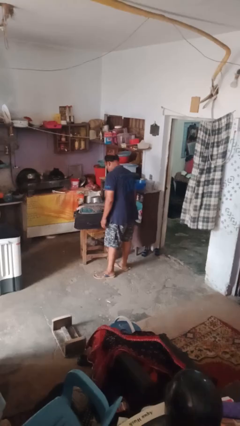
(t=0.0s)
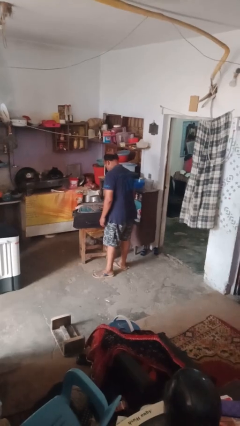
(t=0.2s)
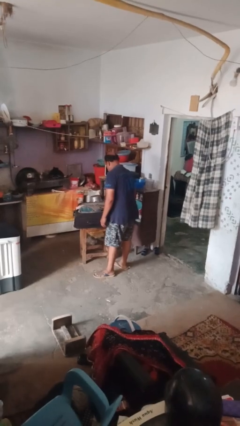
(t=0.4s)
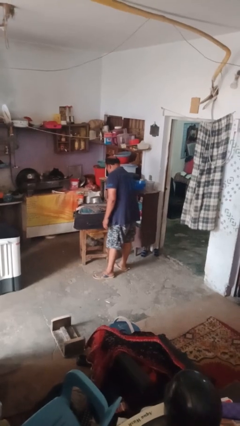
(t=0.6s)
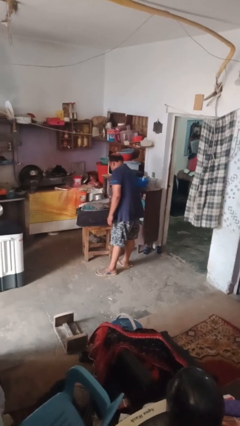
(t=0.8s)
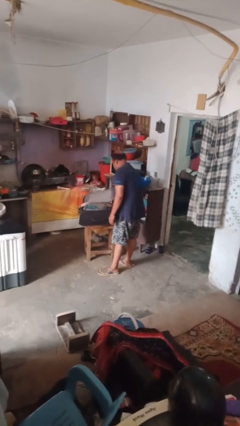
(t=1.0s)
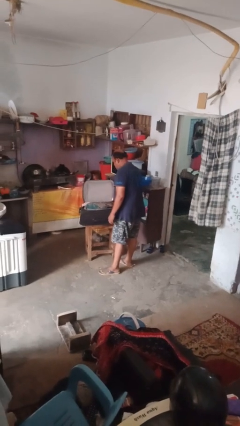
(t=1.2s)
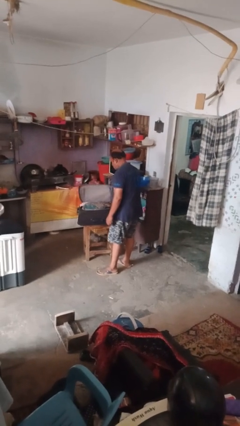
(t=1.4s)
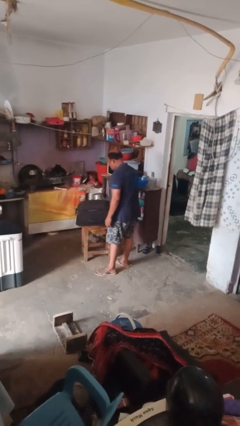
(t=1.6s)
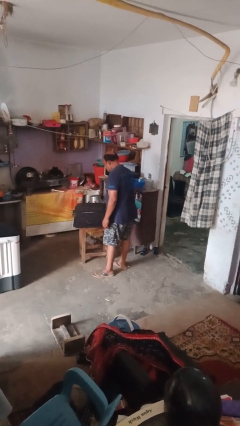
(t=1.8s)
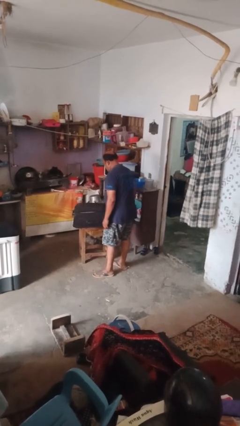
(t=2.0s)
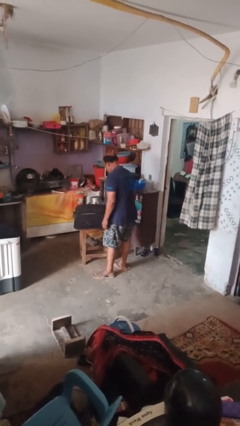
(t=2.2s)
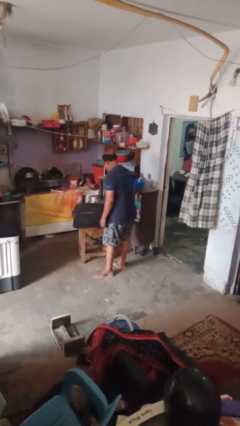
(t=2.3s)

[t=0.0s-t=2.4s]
person closes suitcase

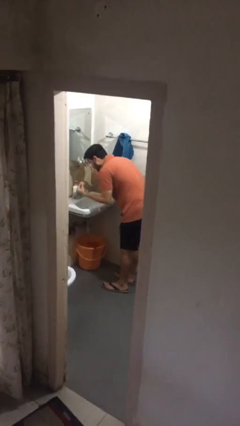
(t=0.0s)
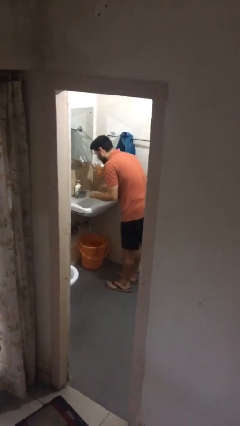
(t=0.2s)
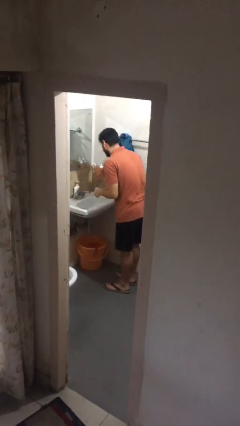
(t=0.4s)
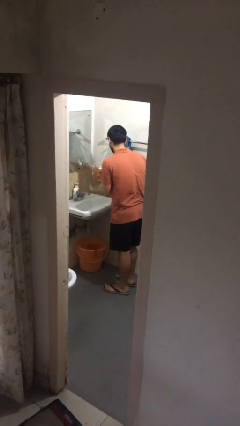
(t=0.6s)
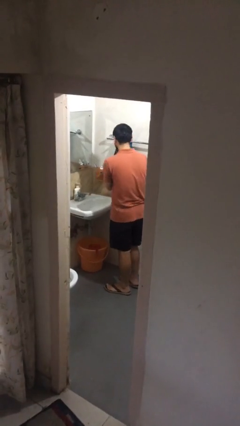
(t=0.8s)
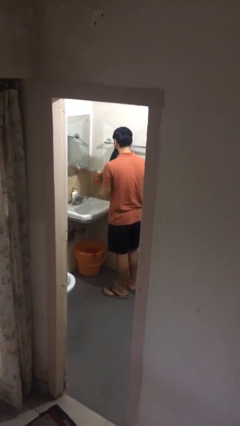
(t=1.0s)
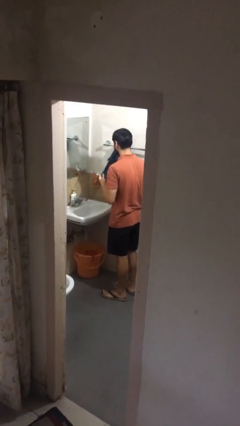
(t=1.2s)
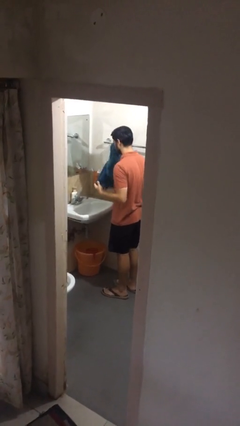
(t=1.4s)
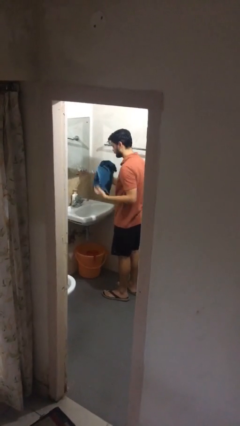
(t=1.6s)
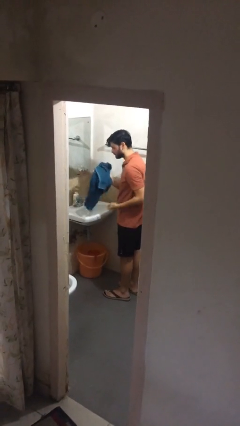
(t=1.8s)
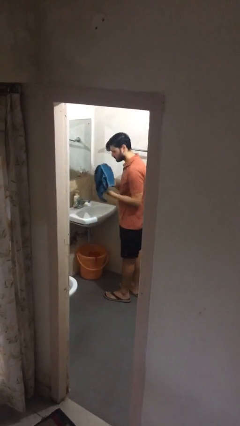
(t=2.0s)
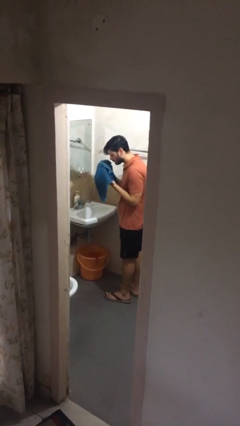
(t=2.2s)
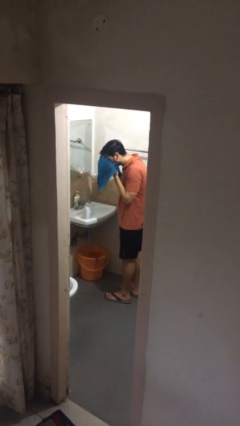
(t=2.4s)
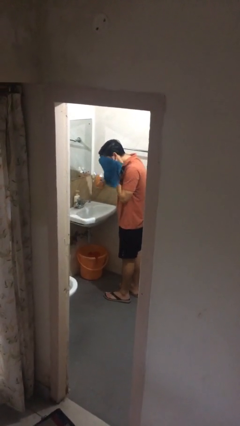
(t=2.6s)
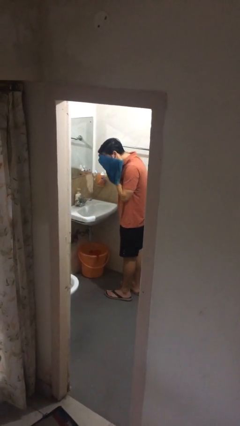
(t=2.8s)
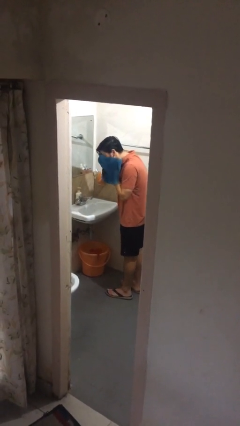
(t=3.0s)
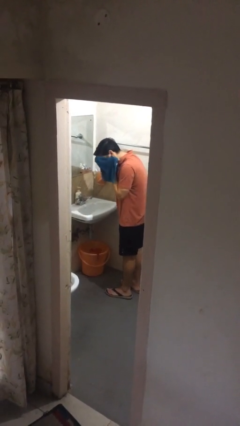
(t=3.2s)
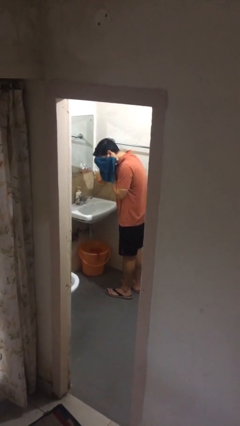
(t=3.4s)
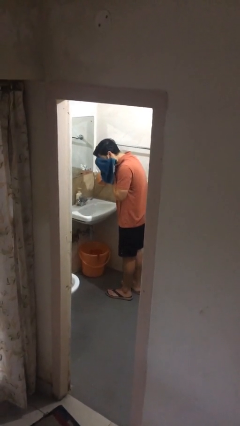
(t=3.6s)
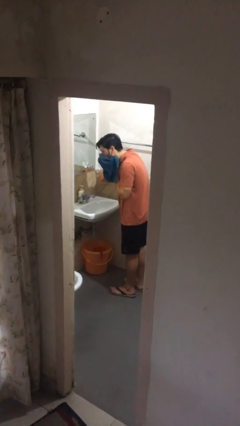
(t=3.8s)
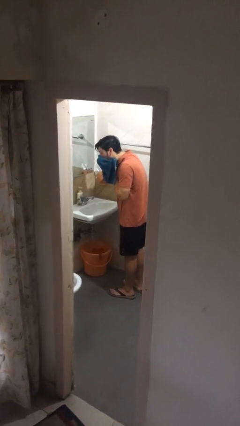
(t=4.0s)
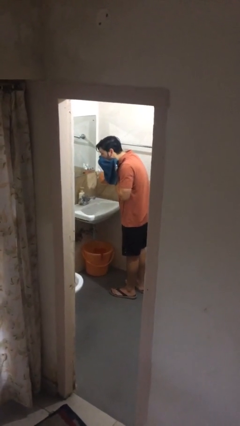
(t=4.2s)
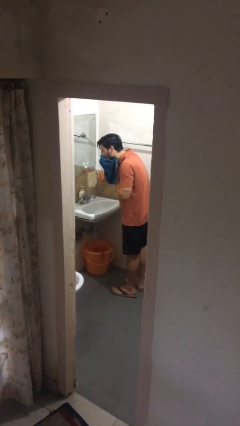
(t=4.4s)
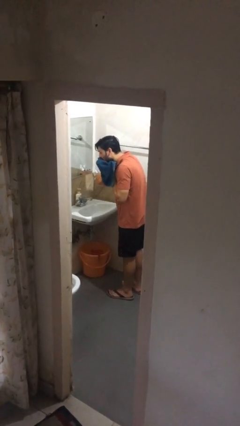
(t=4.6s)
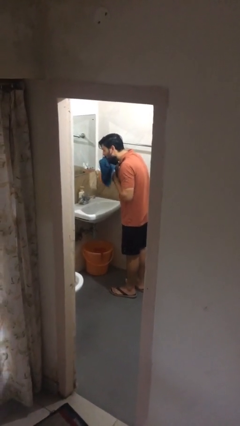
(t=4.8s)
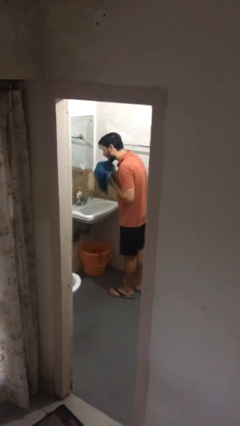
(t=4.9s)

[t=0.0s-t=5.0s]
person dries face with towel

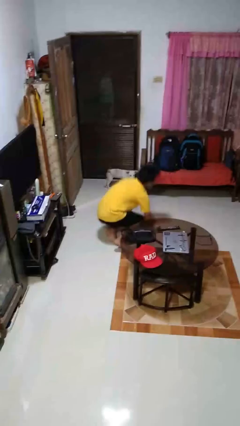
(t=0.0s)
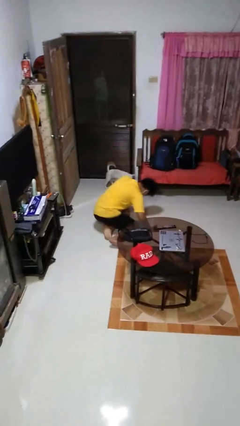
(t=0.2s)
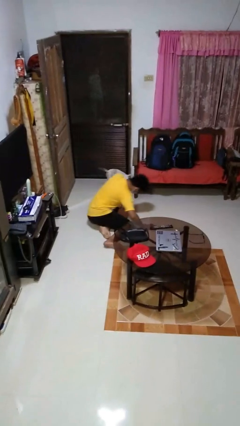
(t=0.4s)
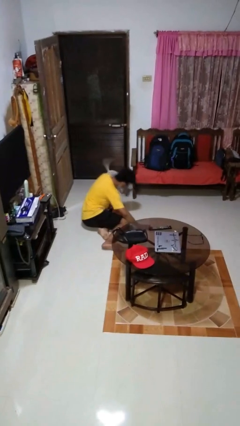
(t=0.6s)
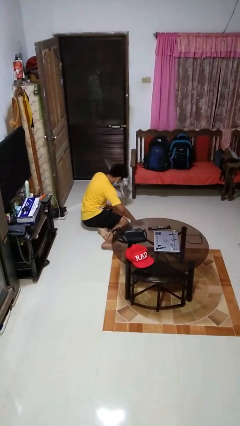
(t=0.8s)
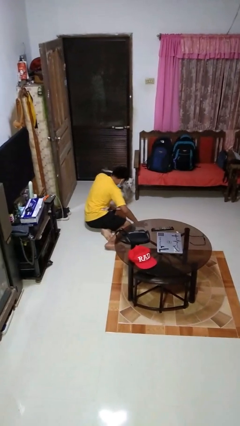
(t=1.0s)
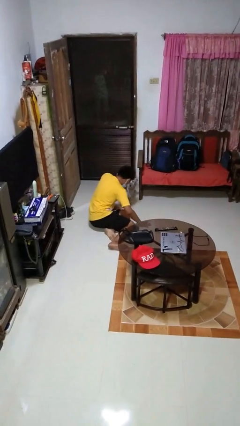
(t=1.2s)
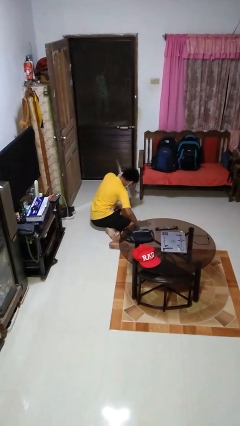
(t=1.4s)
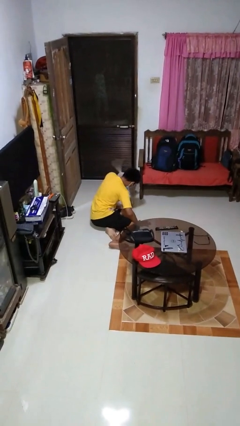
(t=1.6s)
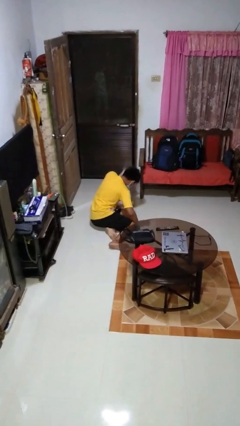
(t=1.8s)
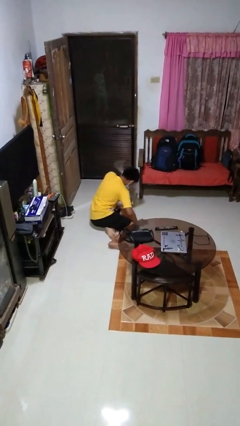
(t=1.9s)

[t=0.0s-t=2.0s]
person lies down on floor

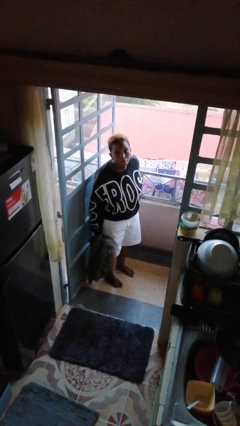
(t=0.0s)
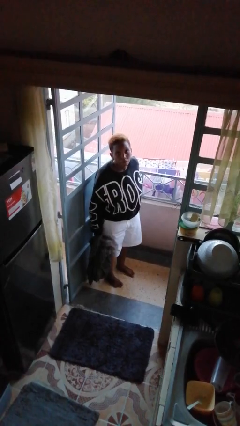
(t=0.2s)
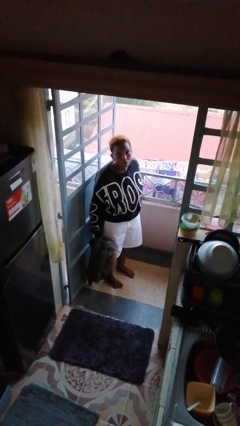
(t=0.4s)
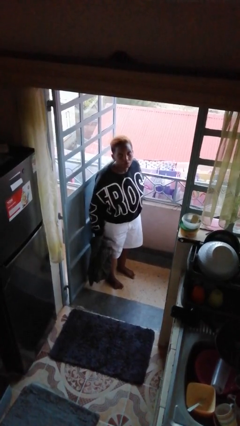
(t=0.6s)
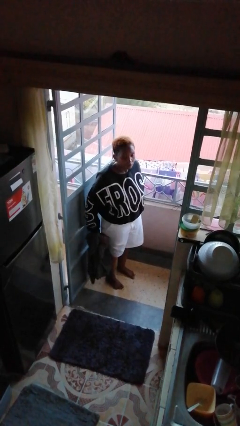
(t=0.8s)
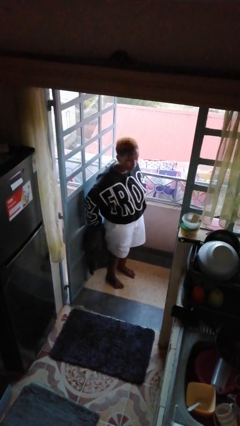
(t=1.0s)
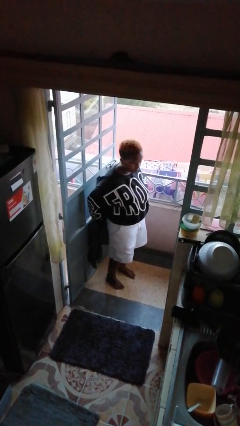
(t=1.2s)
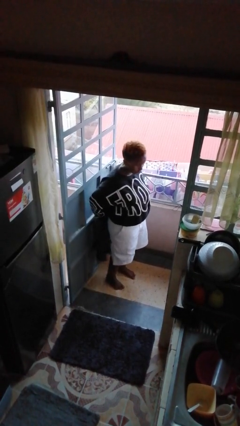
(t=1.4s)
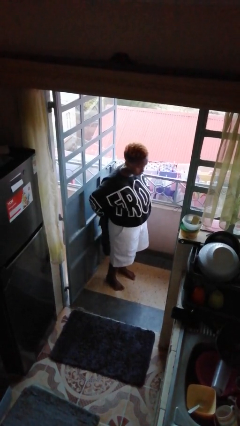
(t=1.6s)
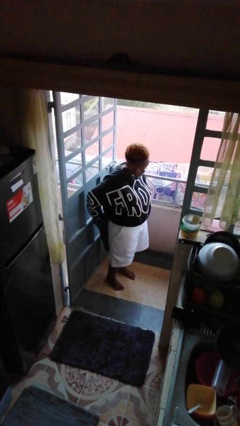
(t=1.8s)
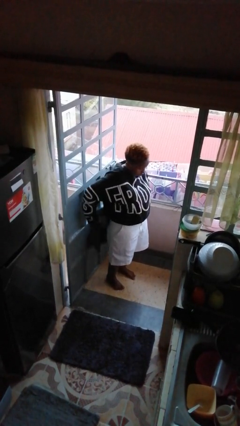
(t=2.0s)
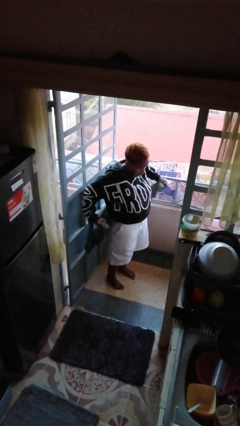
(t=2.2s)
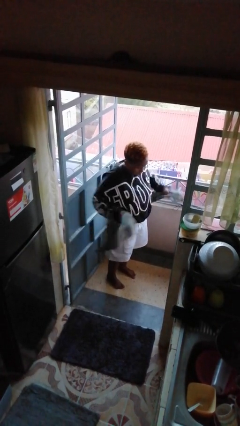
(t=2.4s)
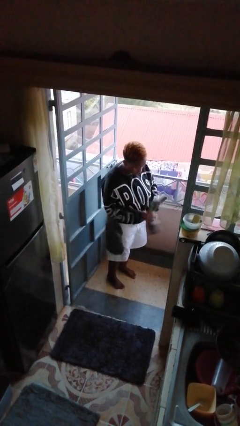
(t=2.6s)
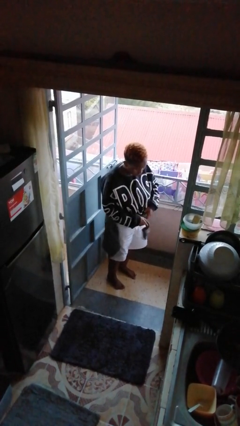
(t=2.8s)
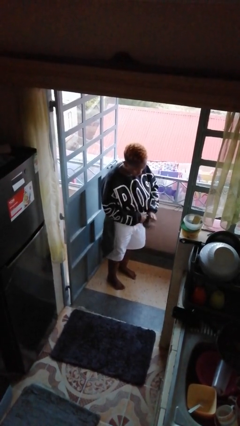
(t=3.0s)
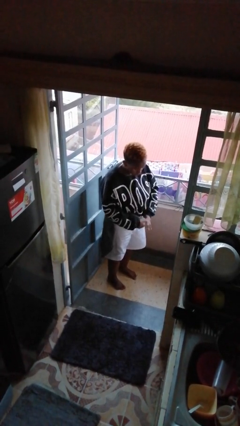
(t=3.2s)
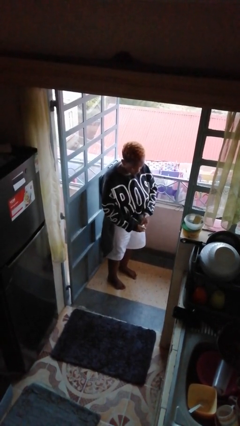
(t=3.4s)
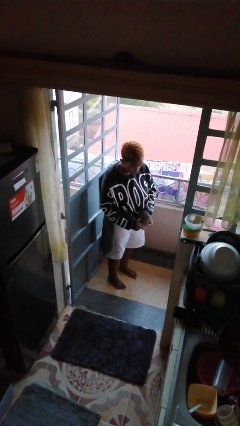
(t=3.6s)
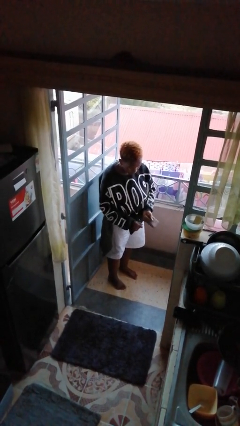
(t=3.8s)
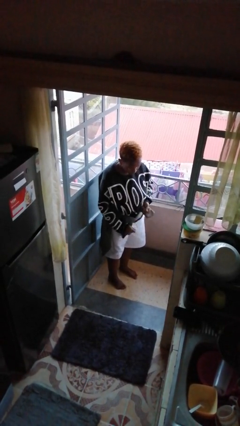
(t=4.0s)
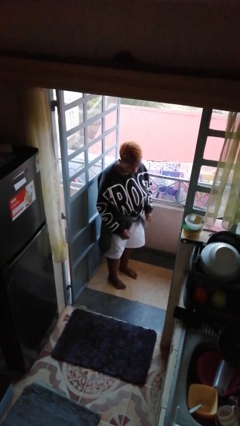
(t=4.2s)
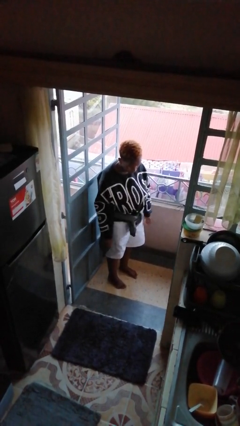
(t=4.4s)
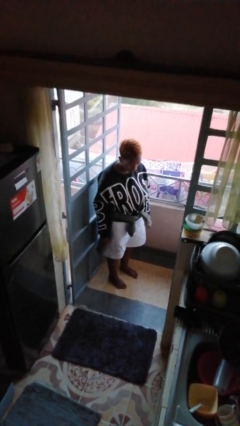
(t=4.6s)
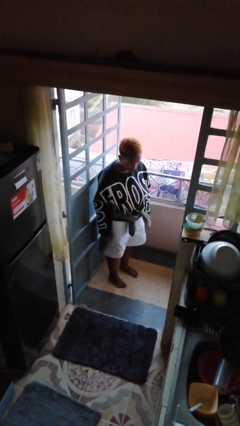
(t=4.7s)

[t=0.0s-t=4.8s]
person ties jacket around waist

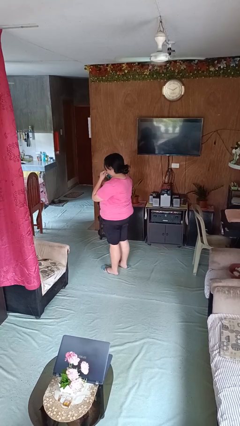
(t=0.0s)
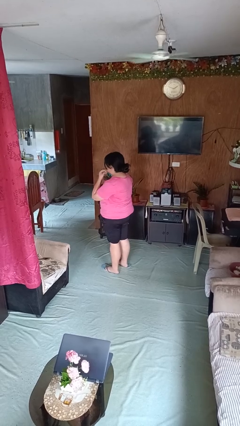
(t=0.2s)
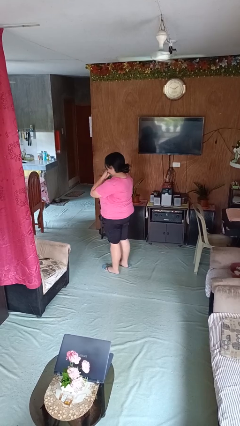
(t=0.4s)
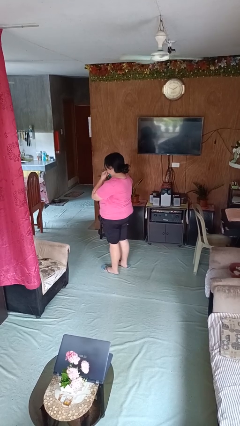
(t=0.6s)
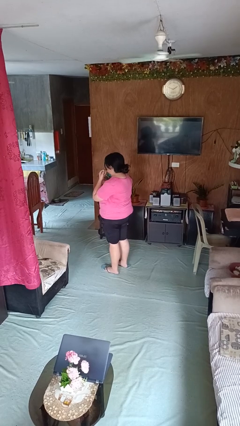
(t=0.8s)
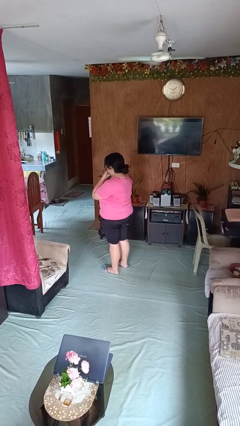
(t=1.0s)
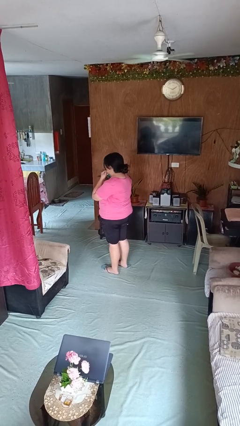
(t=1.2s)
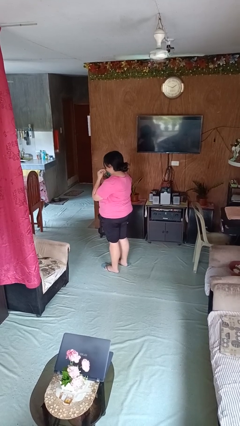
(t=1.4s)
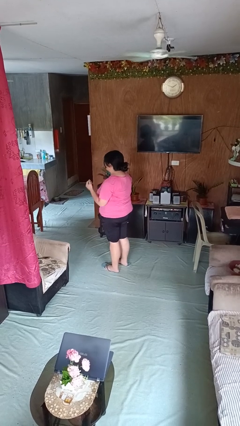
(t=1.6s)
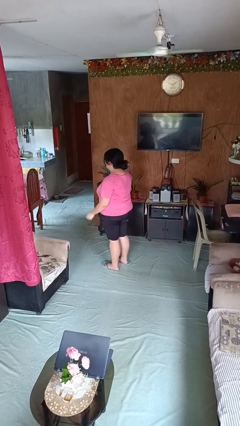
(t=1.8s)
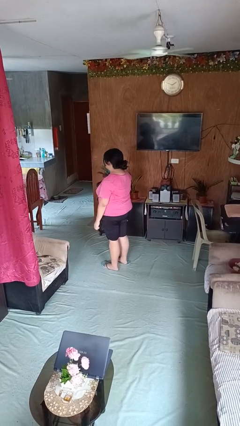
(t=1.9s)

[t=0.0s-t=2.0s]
person strokes chin

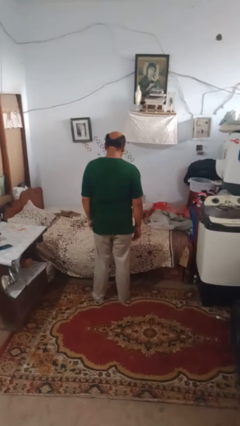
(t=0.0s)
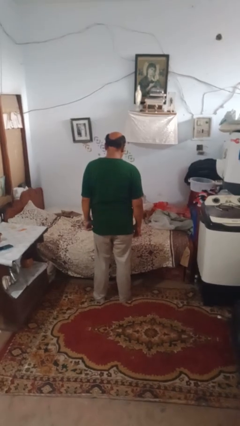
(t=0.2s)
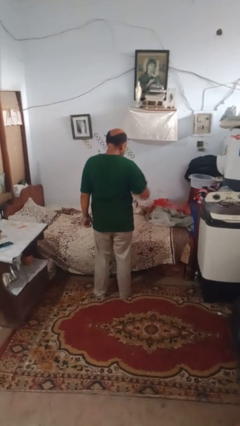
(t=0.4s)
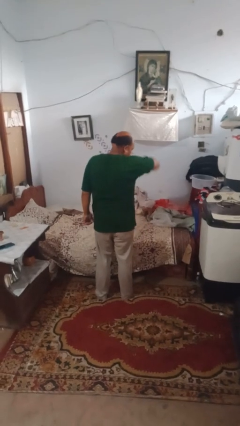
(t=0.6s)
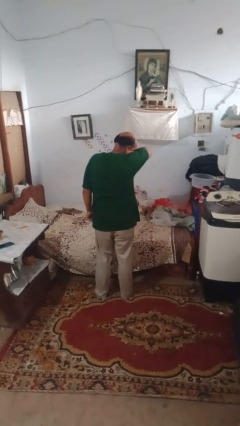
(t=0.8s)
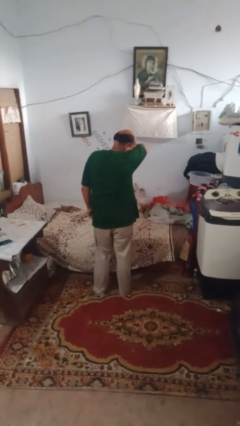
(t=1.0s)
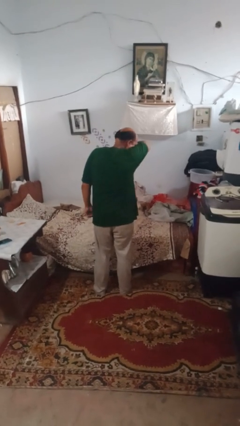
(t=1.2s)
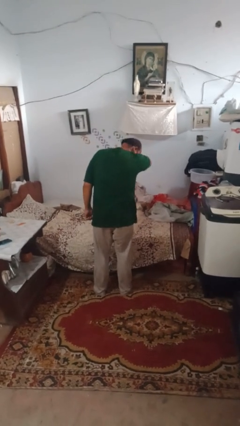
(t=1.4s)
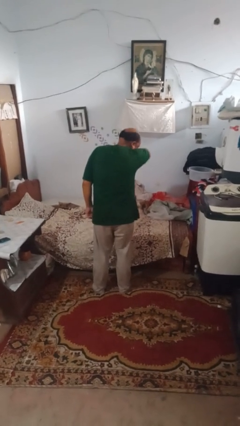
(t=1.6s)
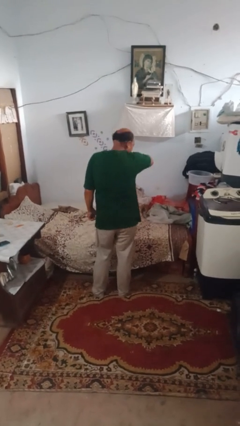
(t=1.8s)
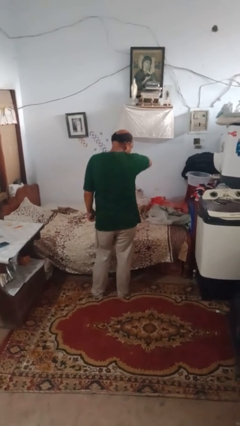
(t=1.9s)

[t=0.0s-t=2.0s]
person sneezes into arm
